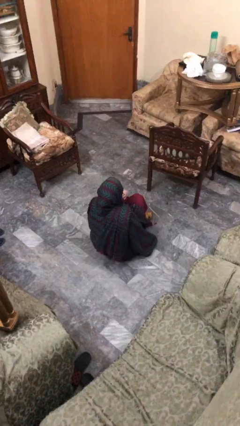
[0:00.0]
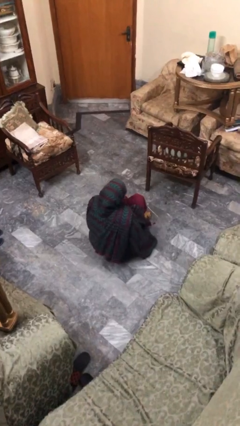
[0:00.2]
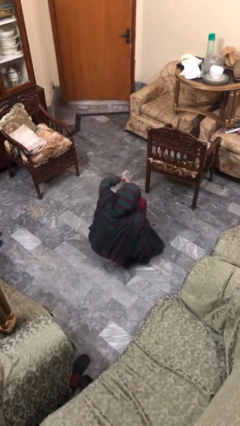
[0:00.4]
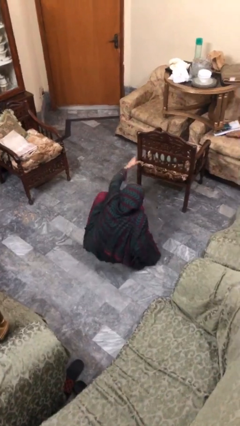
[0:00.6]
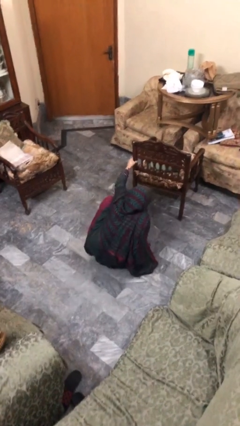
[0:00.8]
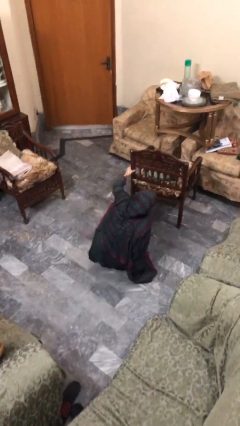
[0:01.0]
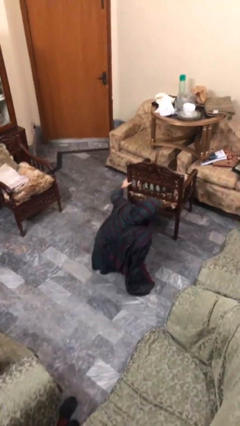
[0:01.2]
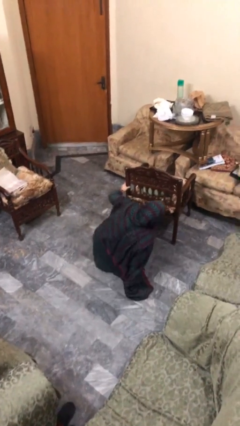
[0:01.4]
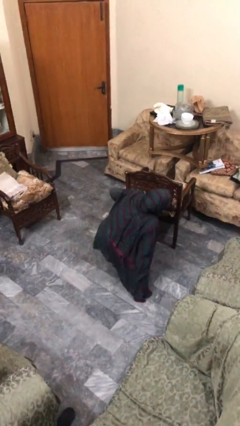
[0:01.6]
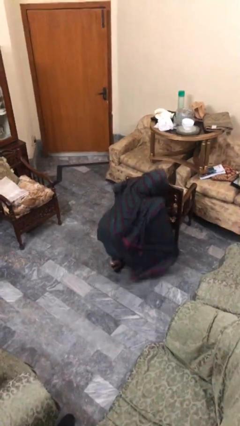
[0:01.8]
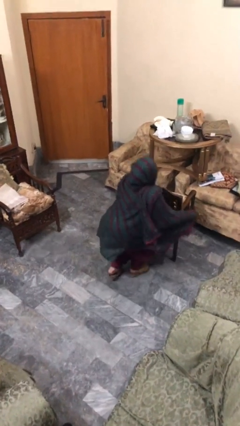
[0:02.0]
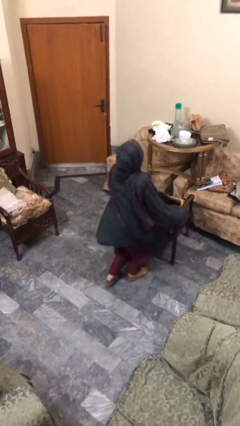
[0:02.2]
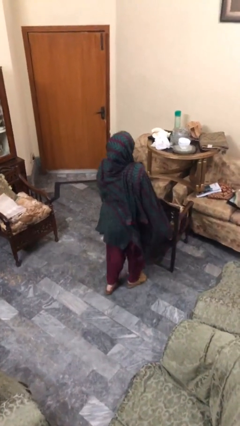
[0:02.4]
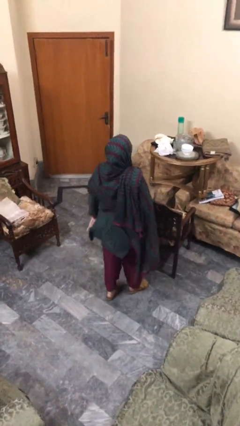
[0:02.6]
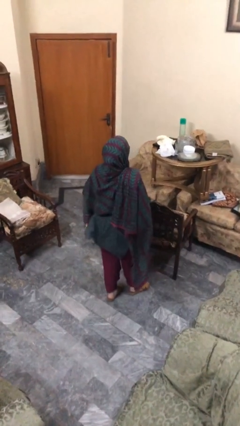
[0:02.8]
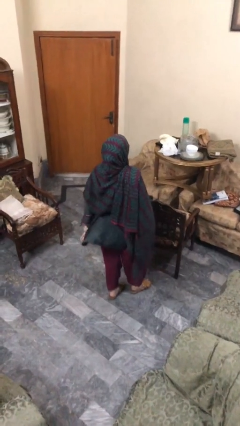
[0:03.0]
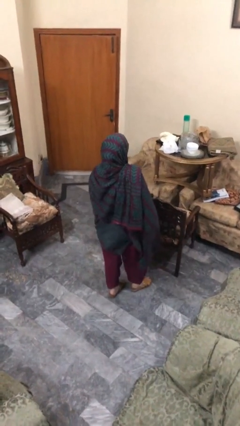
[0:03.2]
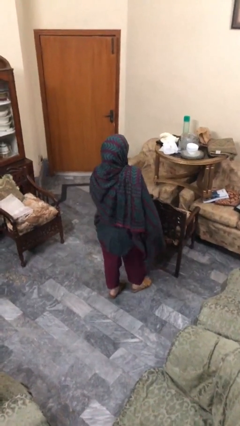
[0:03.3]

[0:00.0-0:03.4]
person stands up from floor

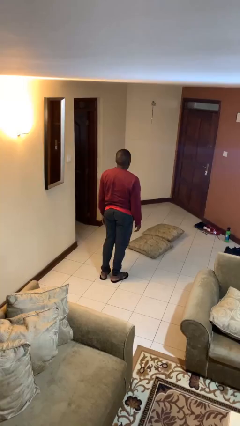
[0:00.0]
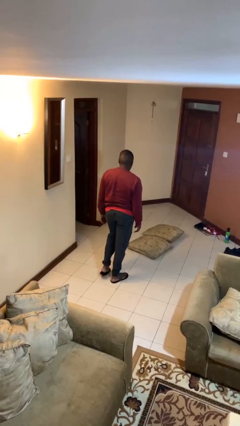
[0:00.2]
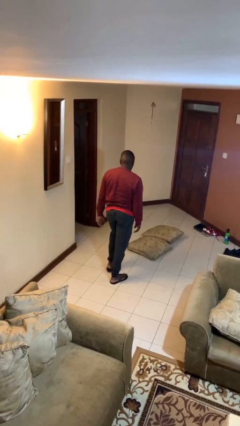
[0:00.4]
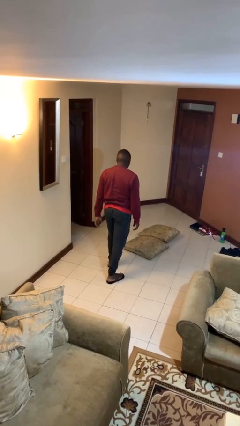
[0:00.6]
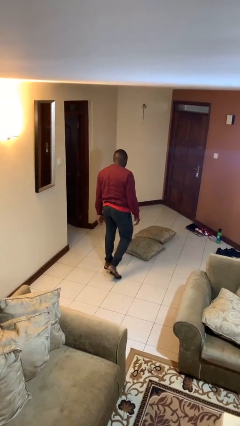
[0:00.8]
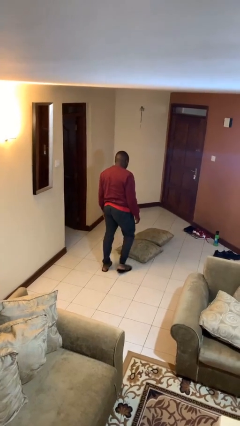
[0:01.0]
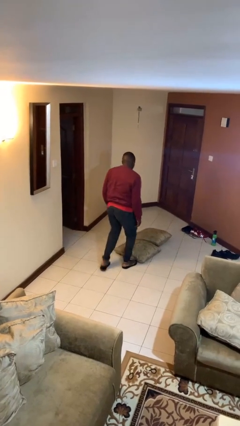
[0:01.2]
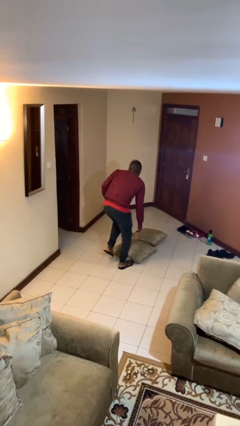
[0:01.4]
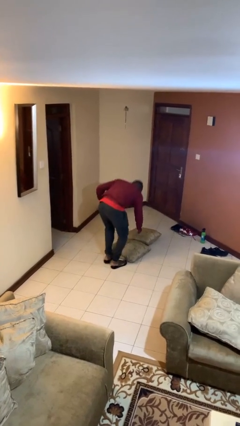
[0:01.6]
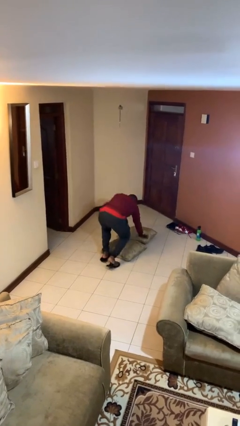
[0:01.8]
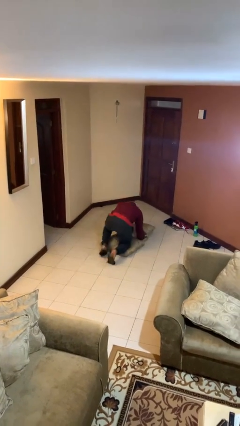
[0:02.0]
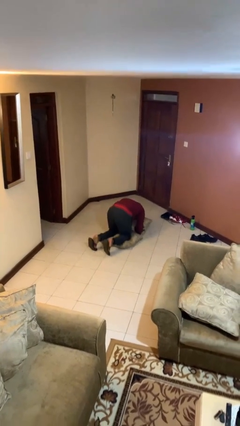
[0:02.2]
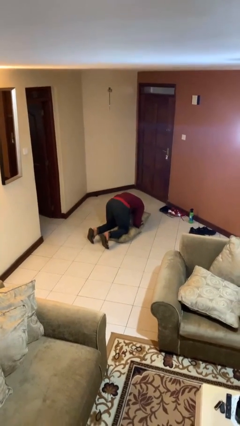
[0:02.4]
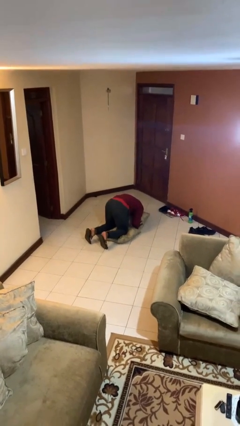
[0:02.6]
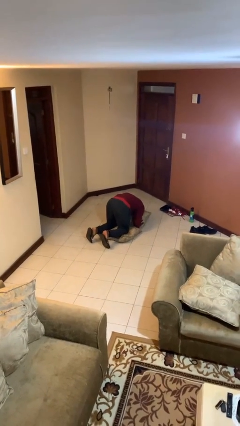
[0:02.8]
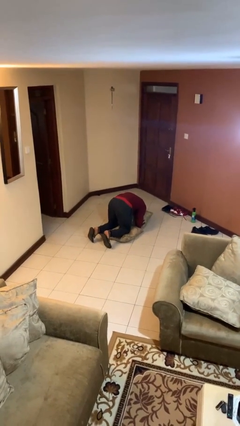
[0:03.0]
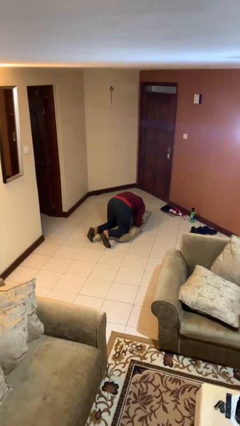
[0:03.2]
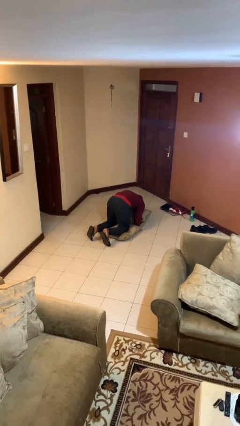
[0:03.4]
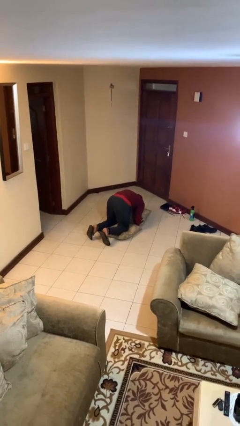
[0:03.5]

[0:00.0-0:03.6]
person trips on object on floor

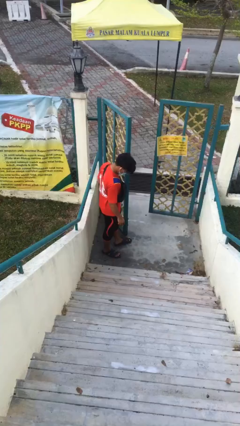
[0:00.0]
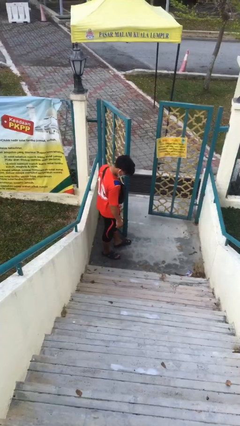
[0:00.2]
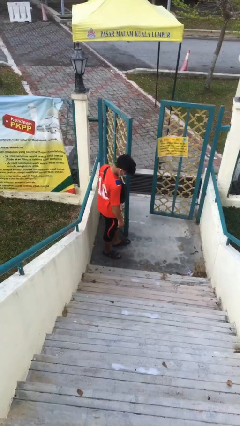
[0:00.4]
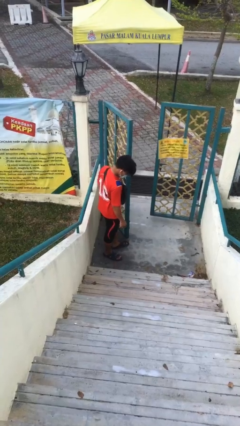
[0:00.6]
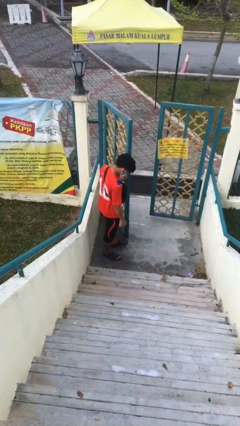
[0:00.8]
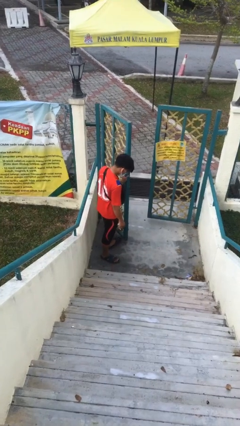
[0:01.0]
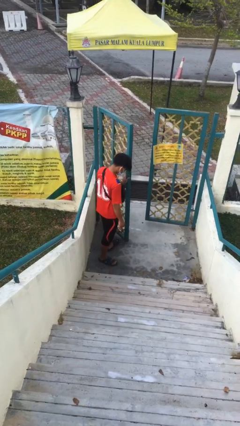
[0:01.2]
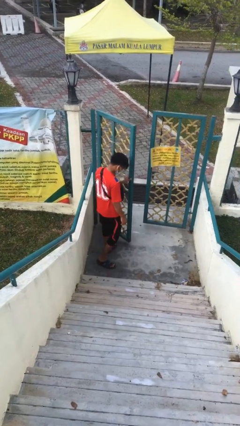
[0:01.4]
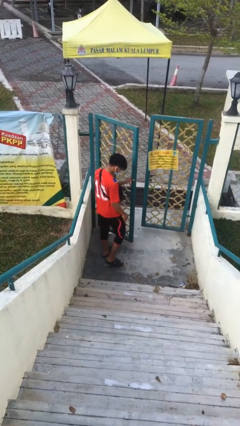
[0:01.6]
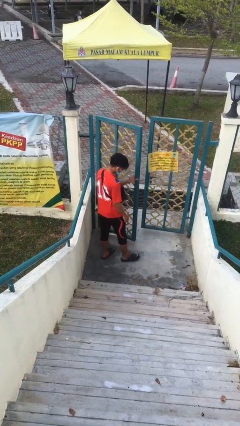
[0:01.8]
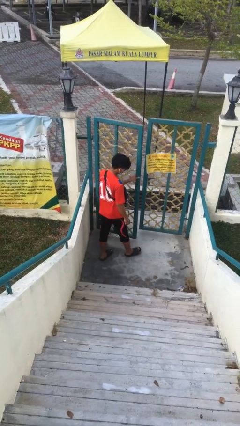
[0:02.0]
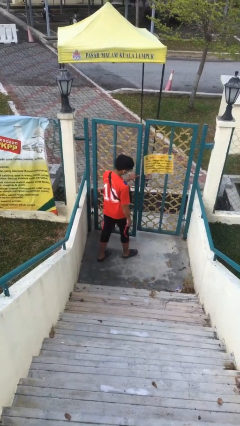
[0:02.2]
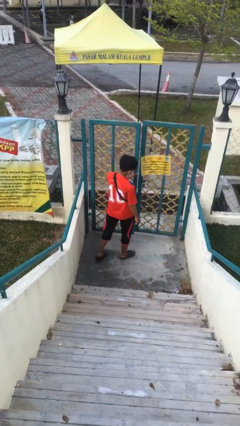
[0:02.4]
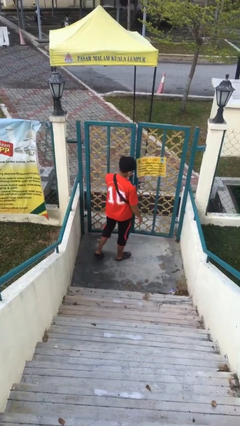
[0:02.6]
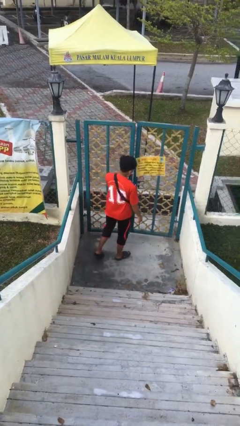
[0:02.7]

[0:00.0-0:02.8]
person closes facility door

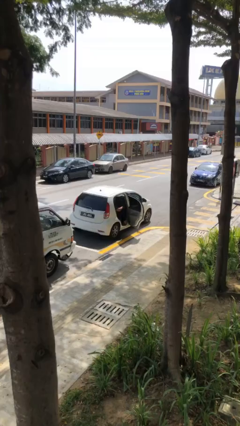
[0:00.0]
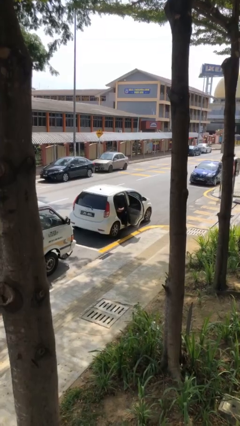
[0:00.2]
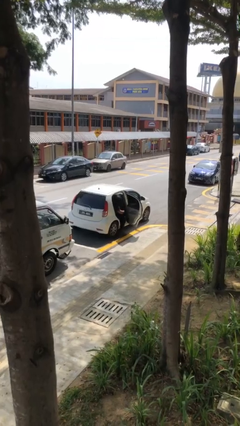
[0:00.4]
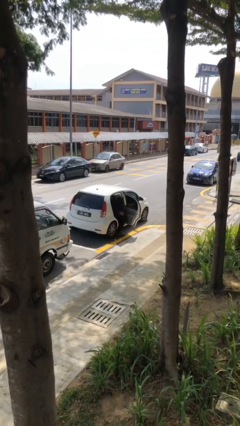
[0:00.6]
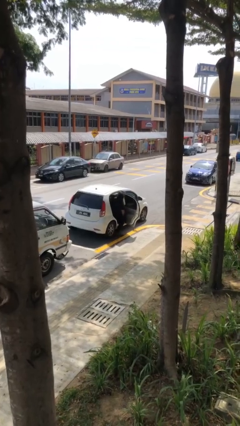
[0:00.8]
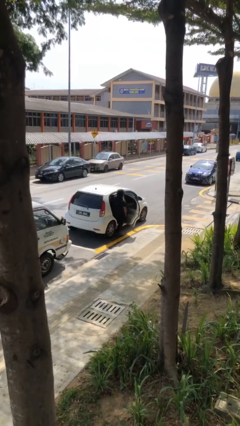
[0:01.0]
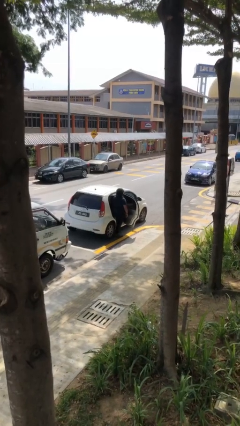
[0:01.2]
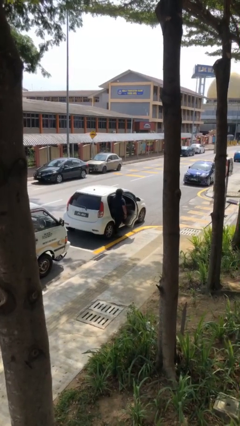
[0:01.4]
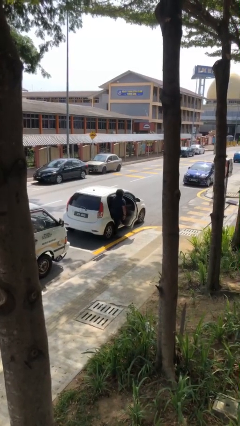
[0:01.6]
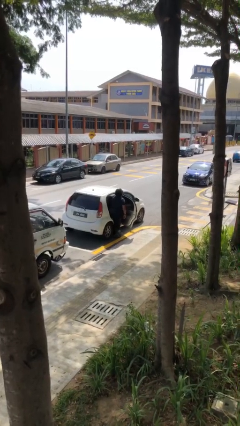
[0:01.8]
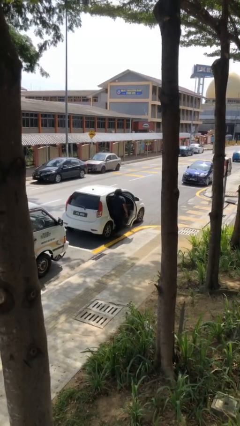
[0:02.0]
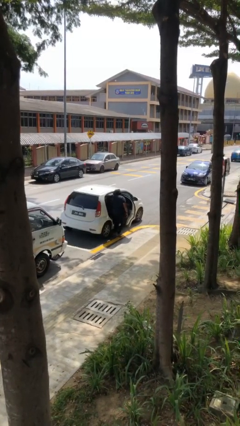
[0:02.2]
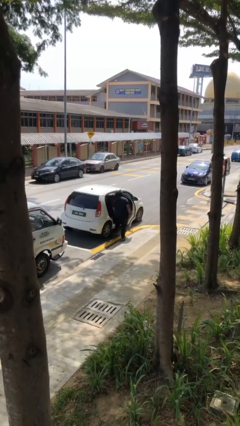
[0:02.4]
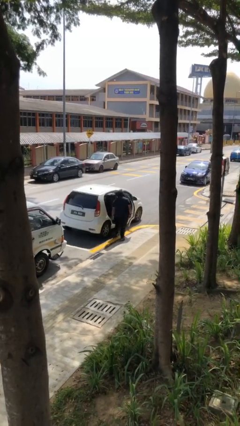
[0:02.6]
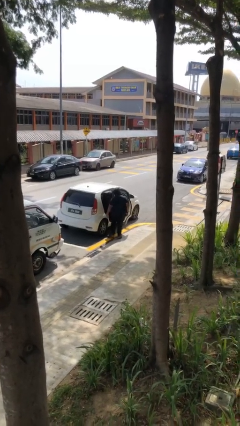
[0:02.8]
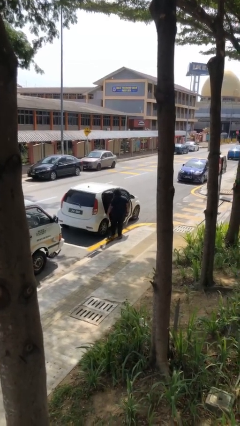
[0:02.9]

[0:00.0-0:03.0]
person exits car

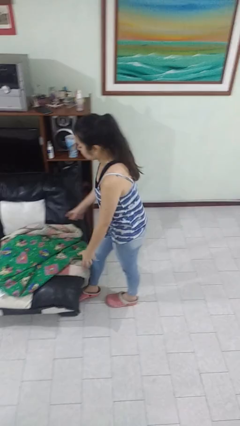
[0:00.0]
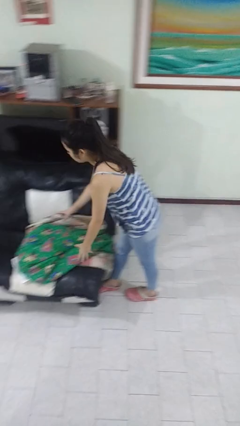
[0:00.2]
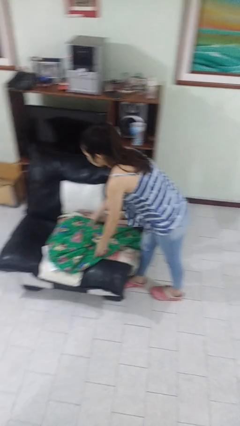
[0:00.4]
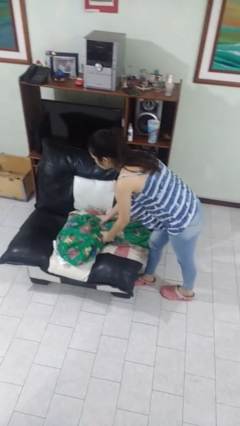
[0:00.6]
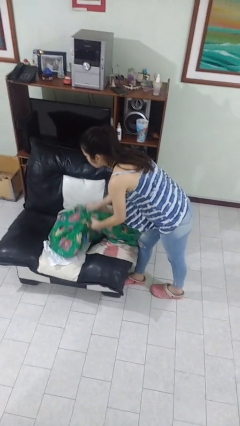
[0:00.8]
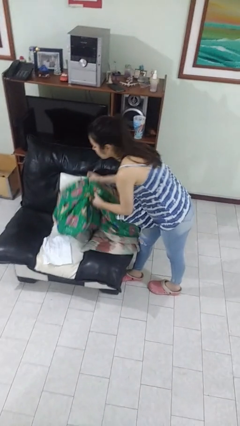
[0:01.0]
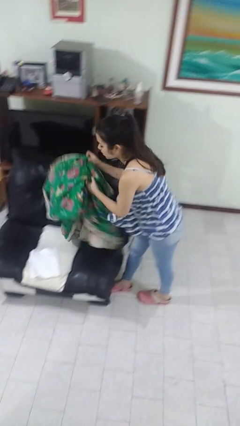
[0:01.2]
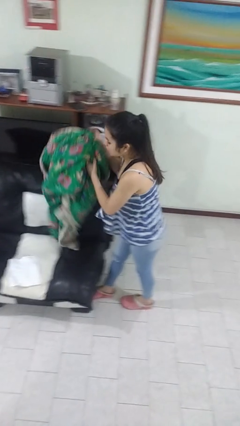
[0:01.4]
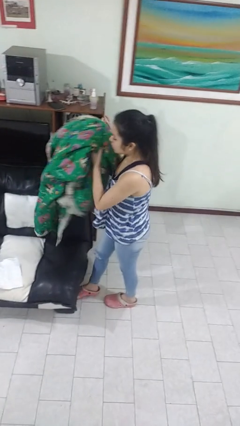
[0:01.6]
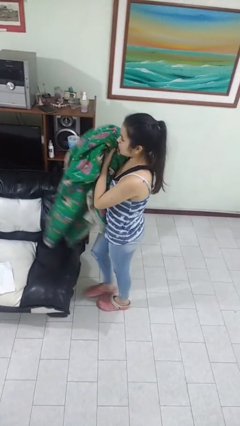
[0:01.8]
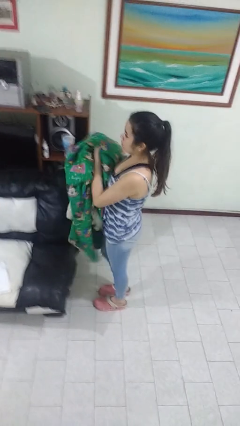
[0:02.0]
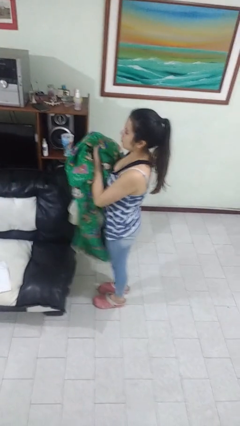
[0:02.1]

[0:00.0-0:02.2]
person picks up object from couch

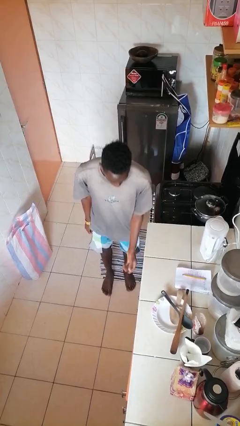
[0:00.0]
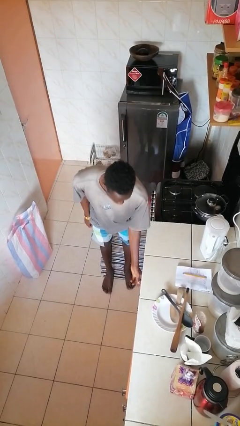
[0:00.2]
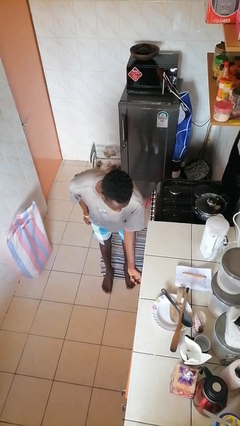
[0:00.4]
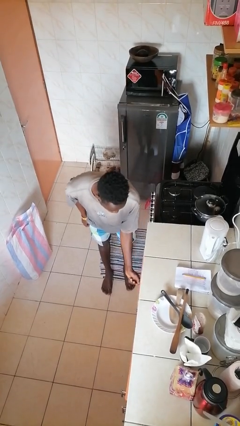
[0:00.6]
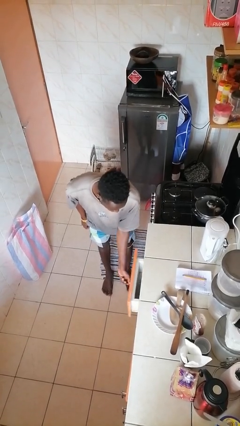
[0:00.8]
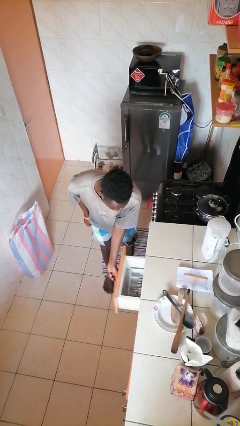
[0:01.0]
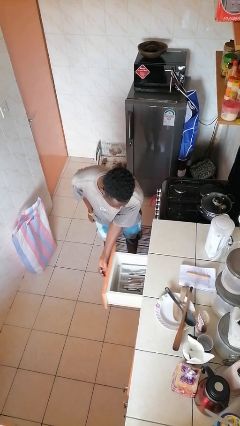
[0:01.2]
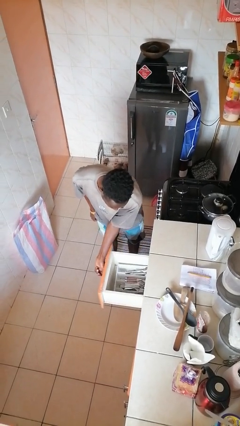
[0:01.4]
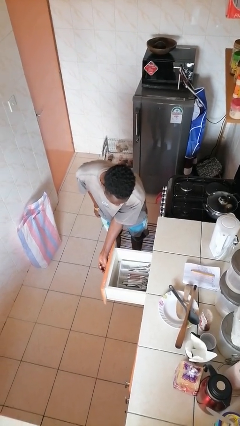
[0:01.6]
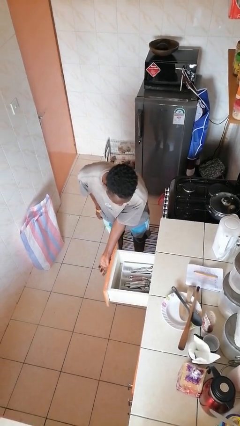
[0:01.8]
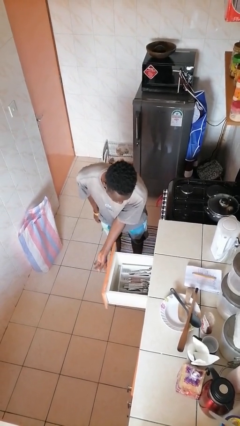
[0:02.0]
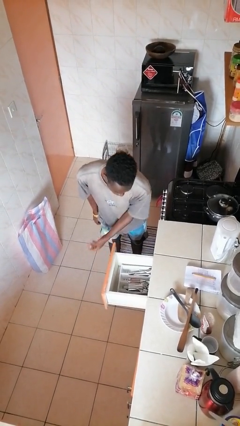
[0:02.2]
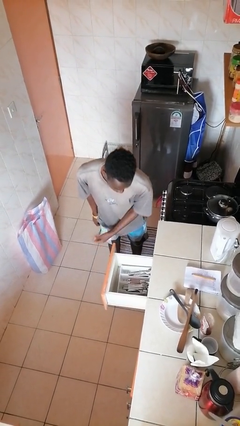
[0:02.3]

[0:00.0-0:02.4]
person opens kitchen drawer
